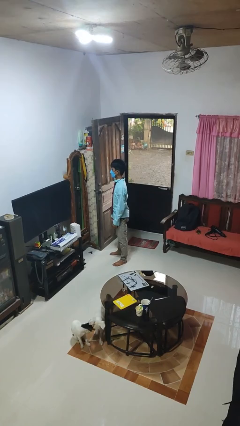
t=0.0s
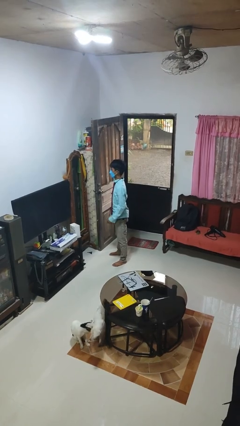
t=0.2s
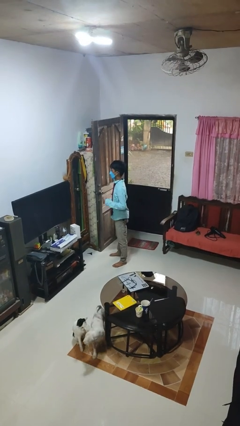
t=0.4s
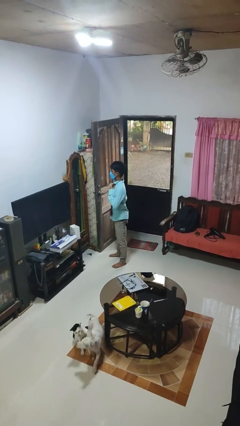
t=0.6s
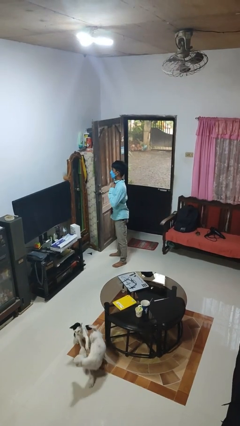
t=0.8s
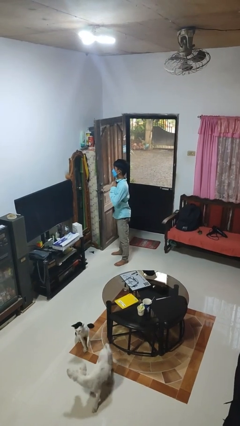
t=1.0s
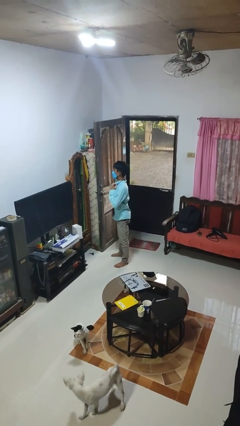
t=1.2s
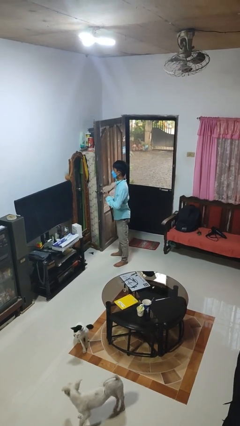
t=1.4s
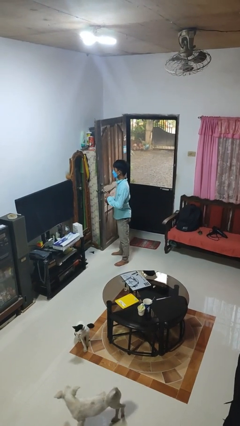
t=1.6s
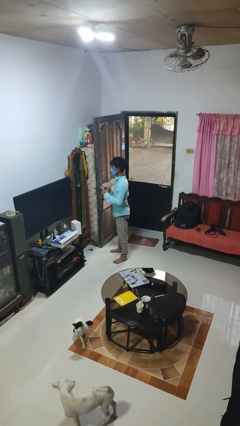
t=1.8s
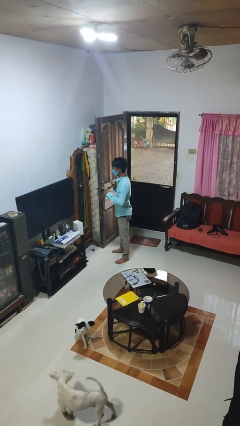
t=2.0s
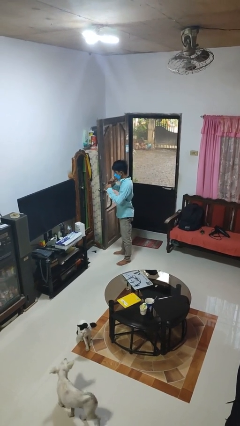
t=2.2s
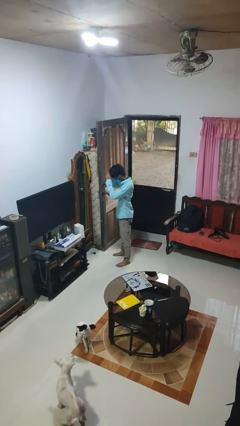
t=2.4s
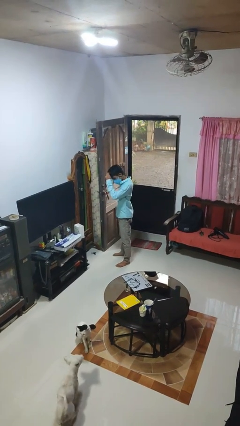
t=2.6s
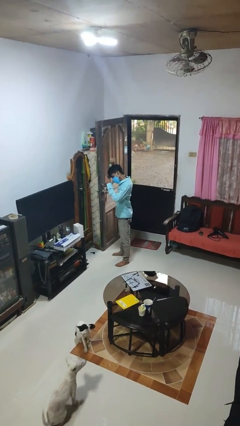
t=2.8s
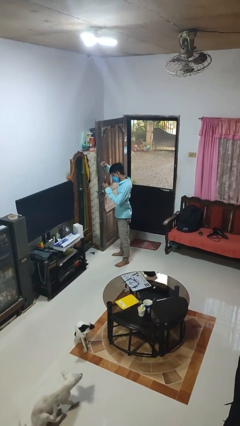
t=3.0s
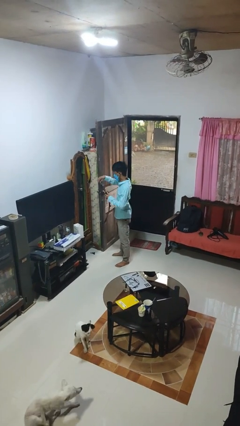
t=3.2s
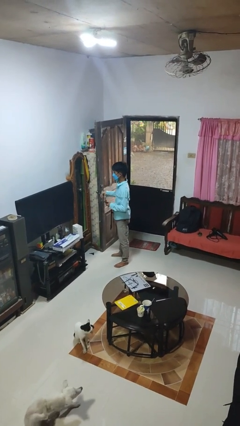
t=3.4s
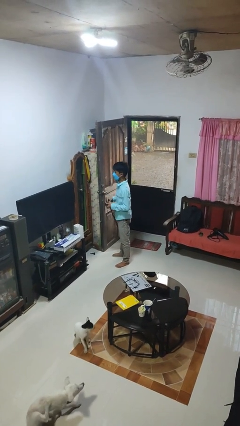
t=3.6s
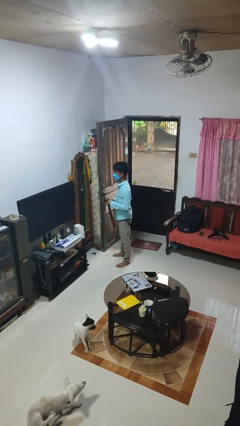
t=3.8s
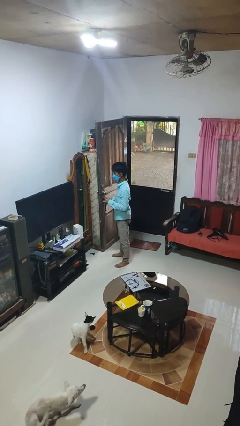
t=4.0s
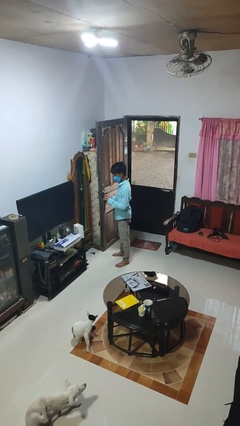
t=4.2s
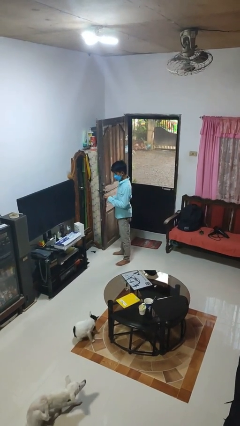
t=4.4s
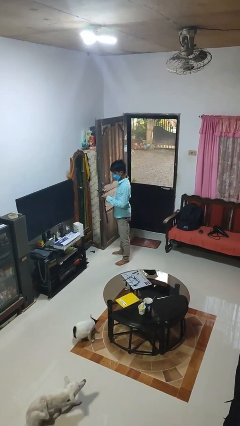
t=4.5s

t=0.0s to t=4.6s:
person takes off necktie

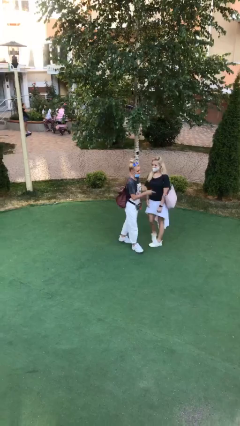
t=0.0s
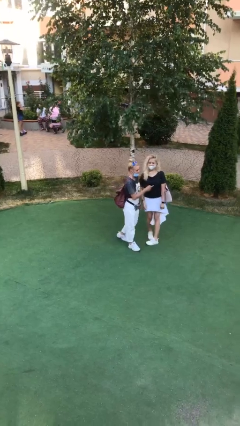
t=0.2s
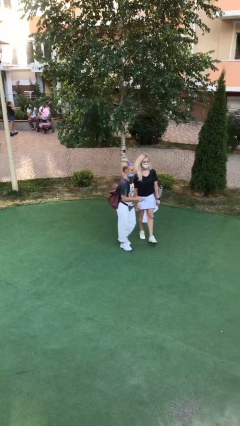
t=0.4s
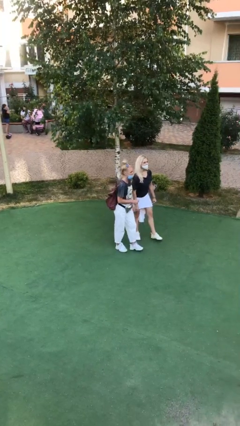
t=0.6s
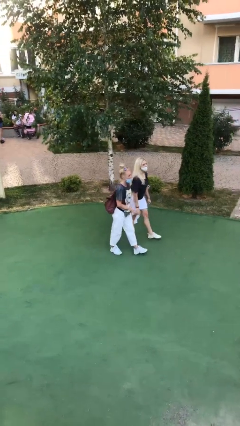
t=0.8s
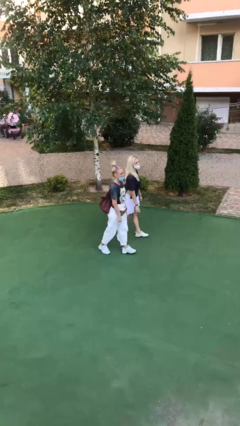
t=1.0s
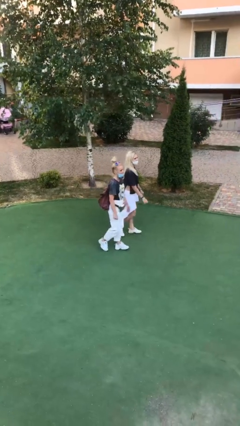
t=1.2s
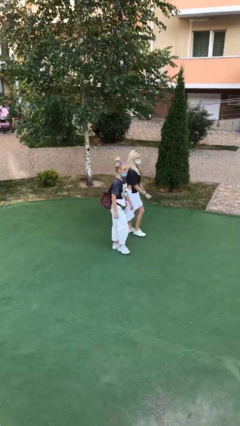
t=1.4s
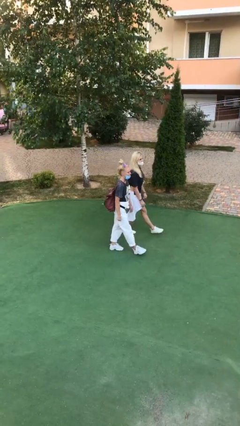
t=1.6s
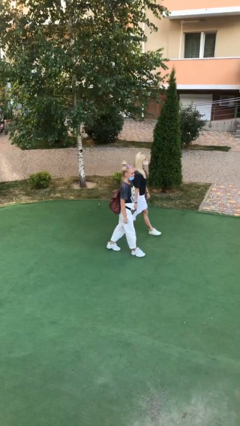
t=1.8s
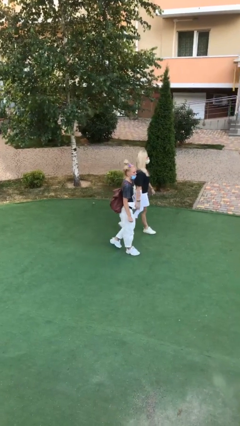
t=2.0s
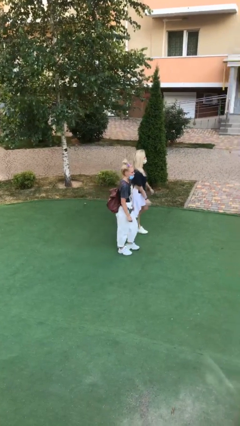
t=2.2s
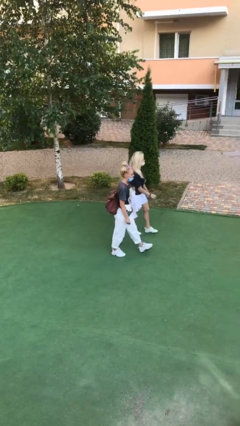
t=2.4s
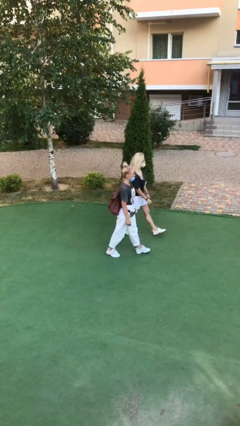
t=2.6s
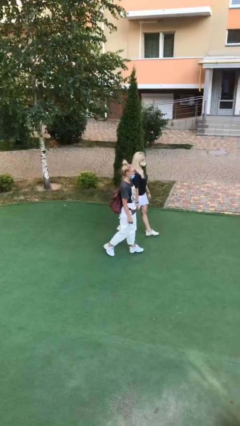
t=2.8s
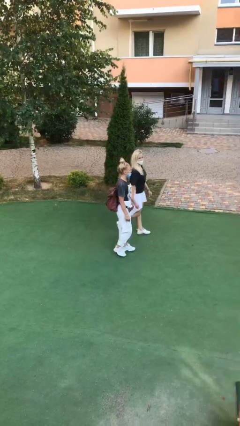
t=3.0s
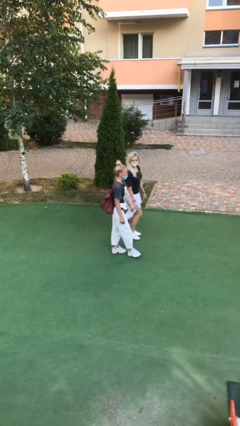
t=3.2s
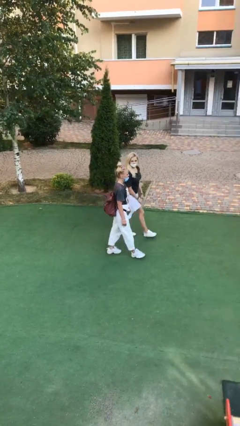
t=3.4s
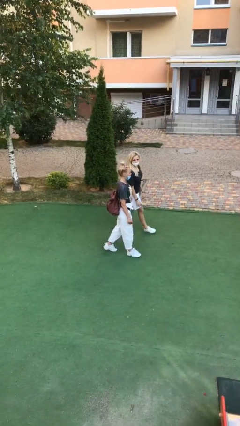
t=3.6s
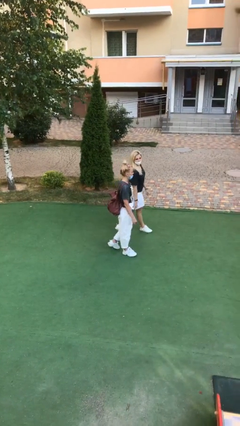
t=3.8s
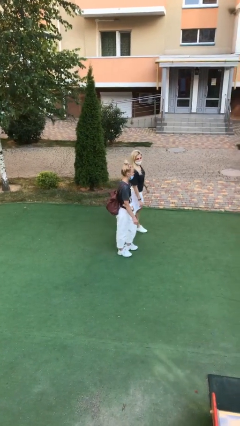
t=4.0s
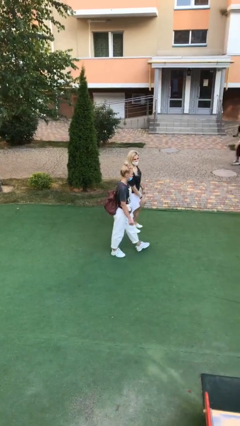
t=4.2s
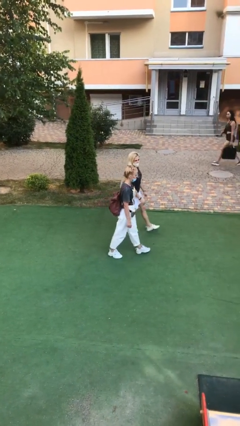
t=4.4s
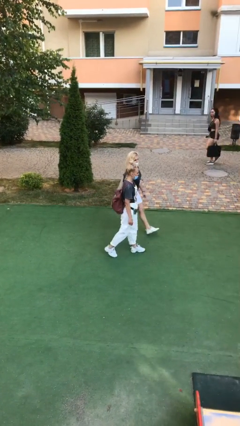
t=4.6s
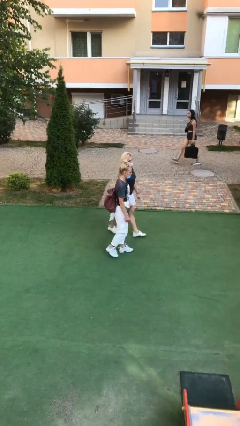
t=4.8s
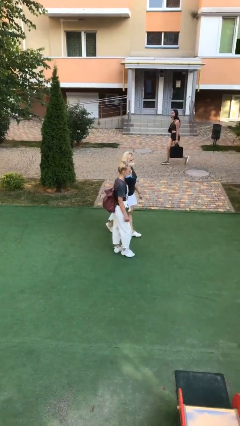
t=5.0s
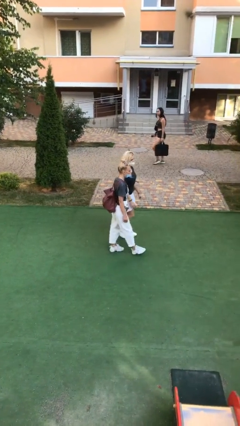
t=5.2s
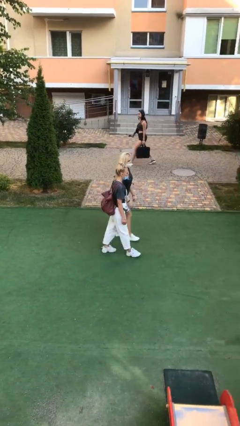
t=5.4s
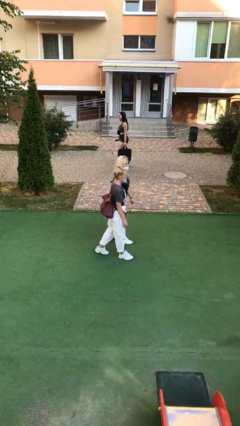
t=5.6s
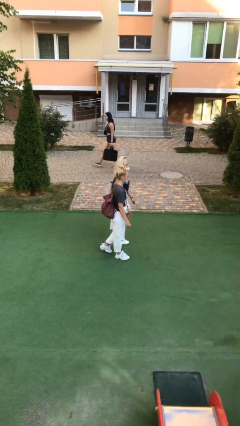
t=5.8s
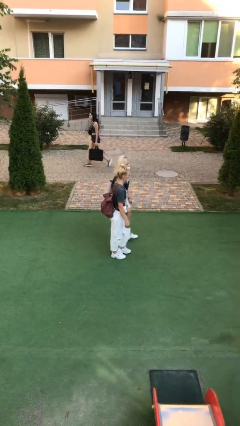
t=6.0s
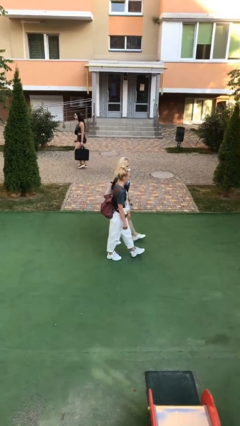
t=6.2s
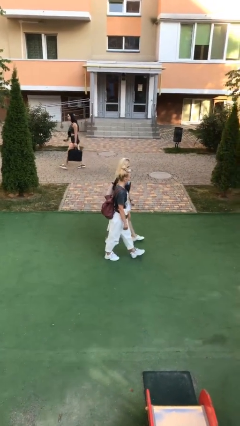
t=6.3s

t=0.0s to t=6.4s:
person talks to person

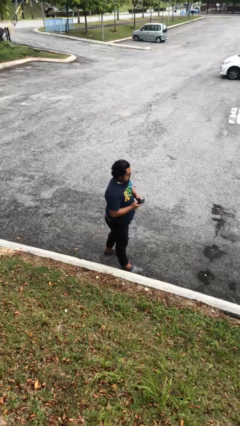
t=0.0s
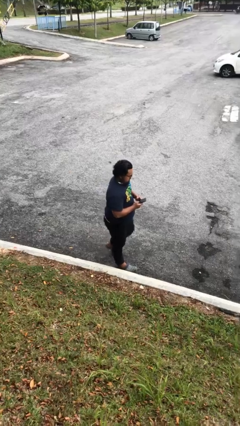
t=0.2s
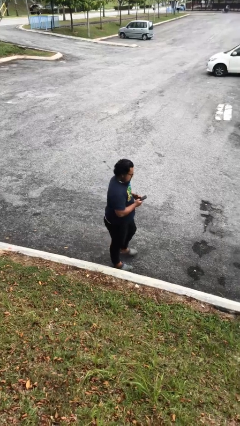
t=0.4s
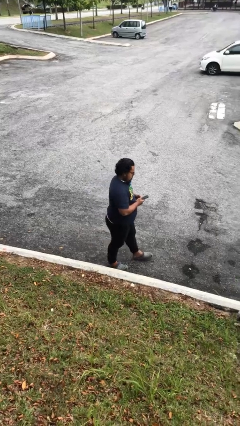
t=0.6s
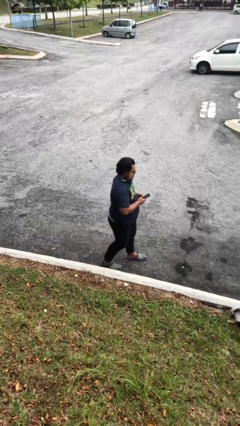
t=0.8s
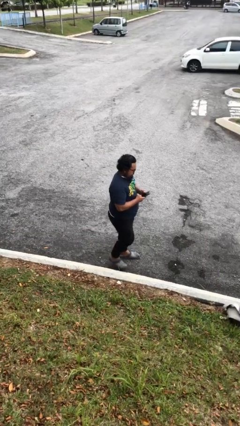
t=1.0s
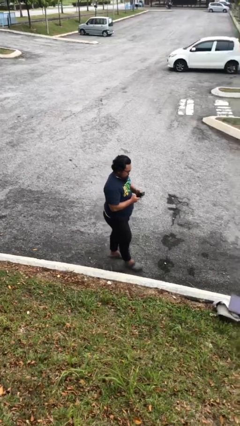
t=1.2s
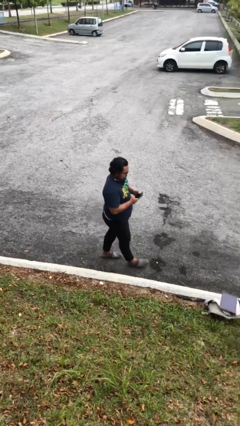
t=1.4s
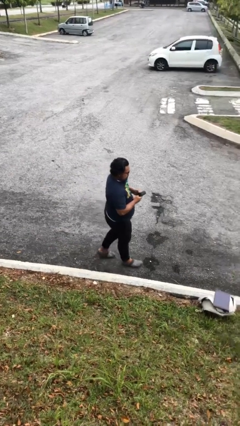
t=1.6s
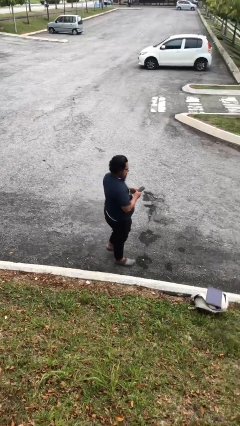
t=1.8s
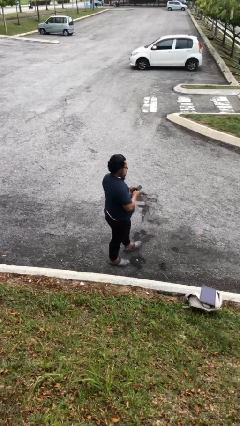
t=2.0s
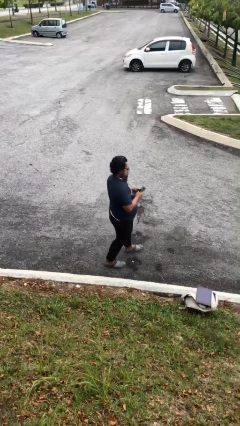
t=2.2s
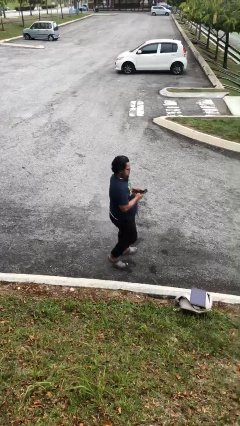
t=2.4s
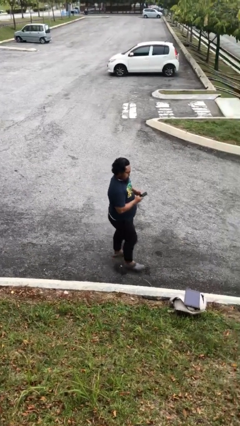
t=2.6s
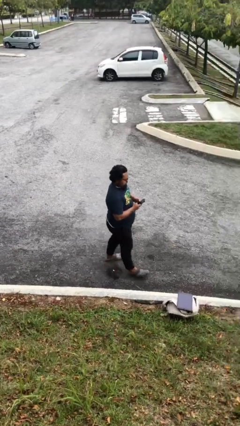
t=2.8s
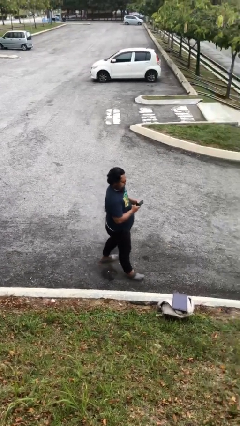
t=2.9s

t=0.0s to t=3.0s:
person texts on phone

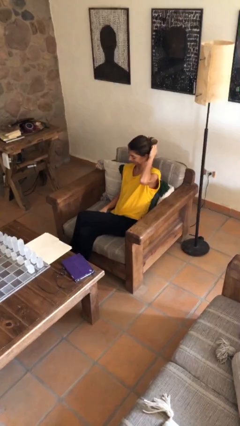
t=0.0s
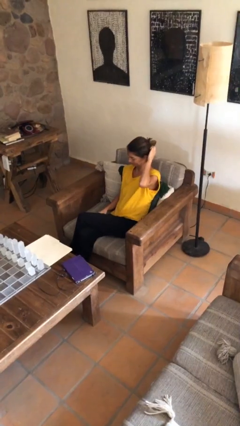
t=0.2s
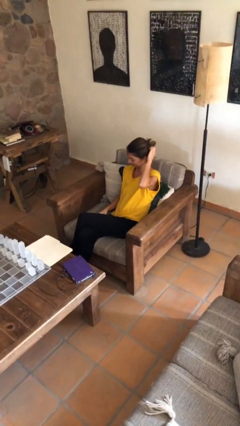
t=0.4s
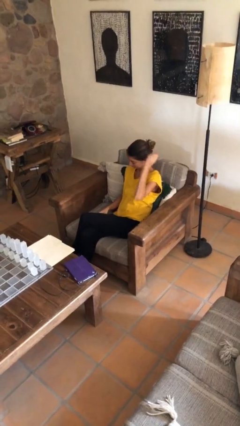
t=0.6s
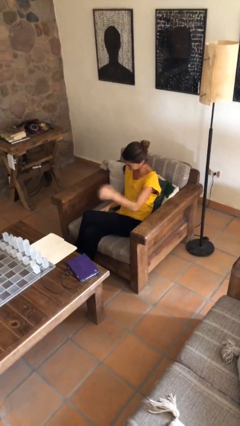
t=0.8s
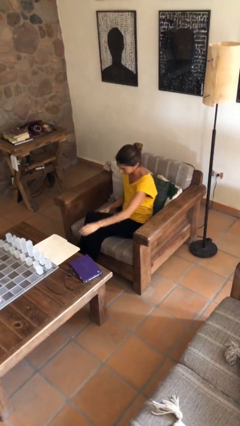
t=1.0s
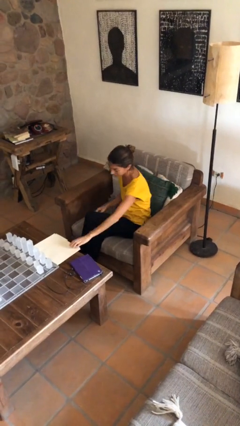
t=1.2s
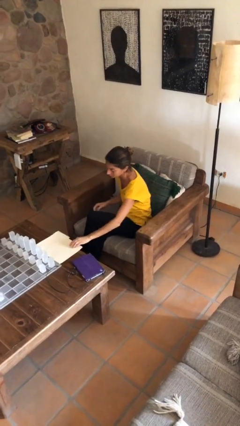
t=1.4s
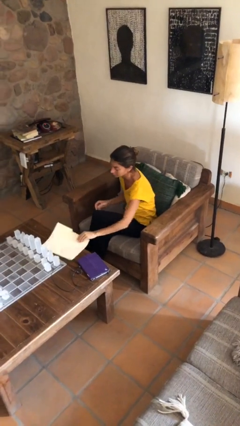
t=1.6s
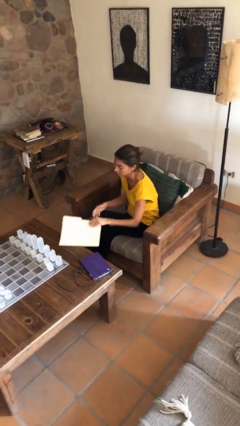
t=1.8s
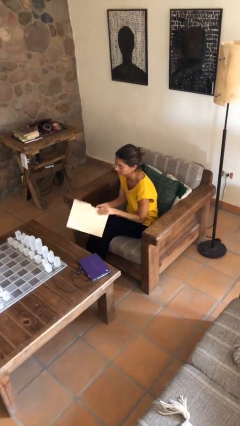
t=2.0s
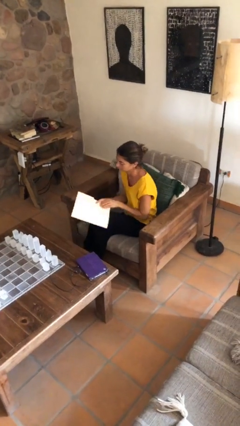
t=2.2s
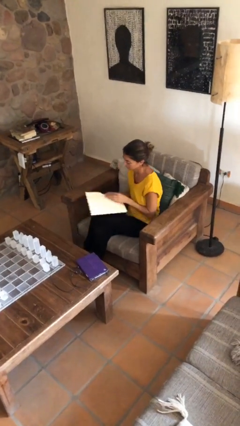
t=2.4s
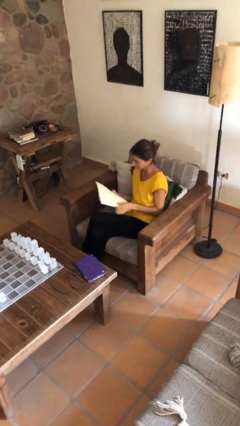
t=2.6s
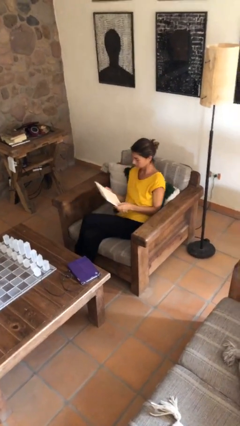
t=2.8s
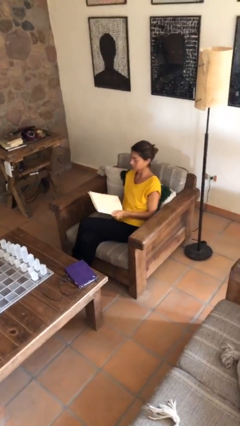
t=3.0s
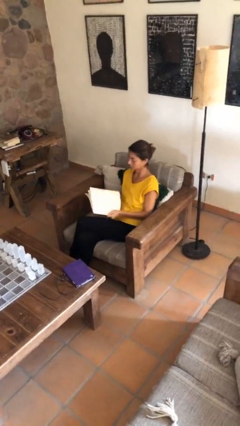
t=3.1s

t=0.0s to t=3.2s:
person picks up object from table

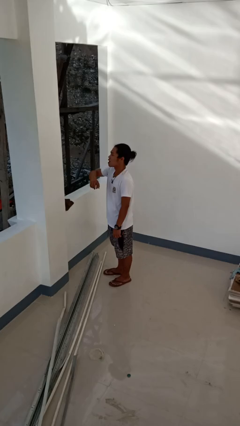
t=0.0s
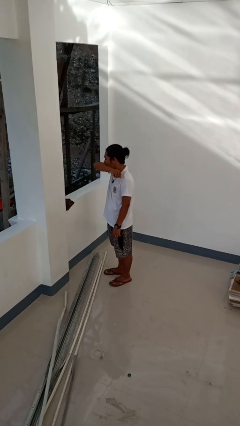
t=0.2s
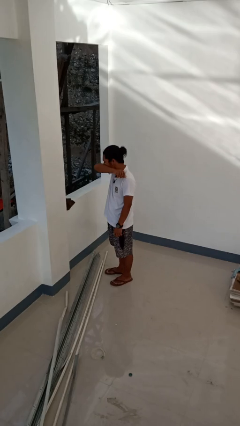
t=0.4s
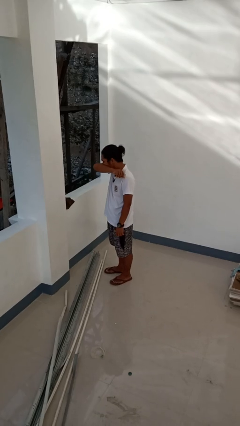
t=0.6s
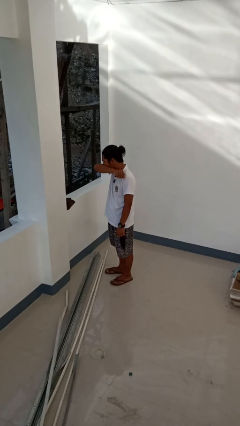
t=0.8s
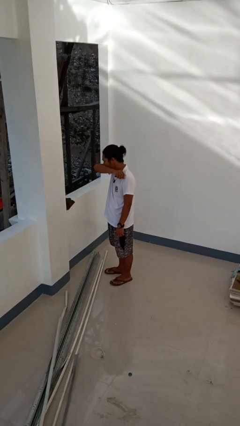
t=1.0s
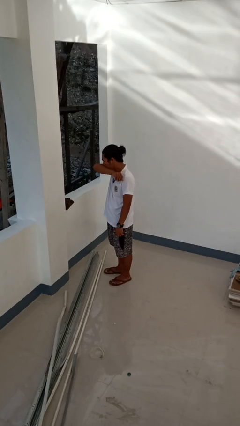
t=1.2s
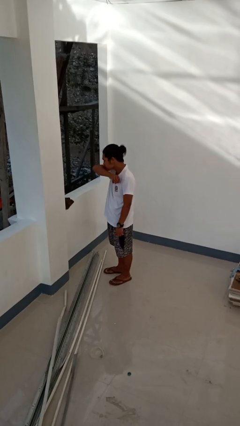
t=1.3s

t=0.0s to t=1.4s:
person sneezes into arm
